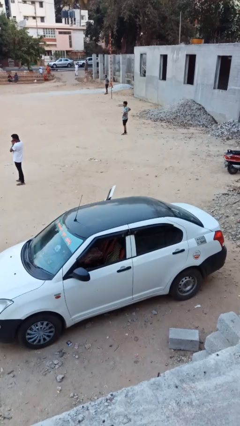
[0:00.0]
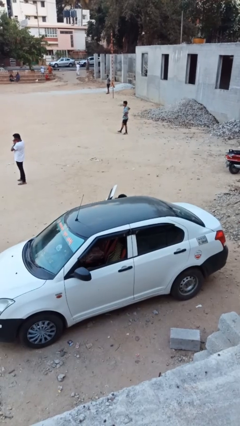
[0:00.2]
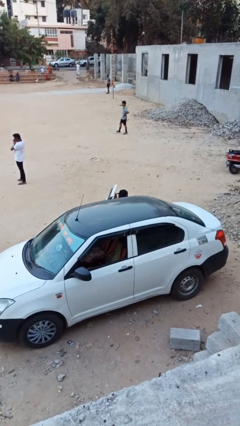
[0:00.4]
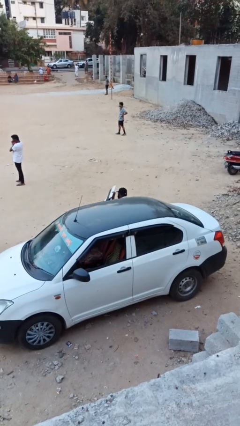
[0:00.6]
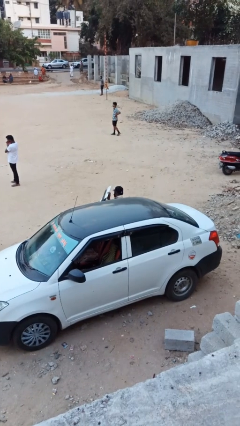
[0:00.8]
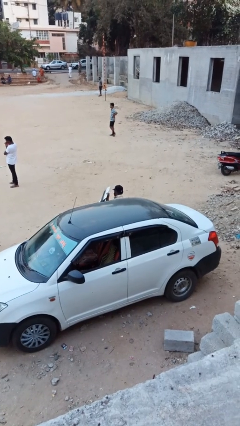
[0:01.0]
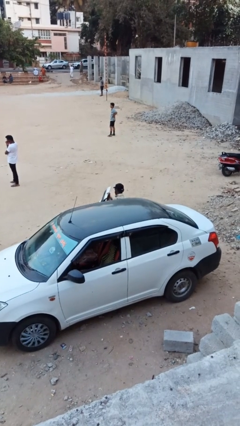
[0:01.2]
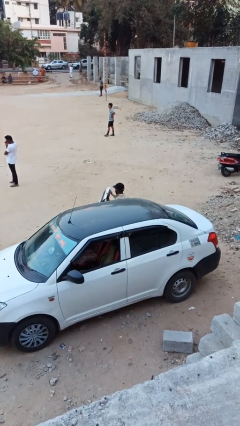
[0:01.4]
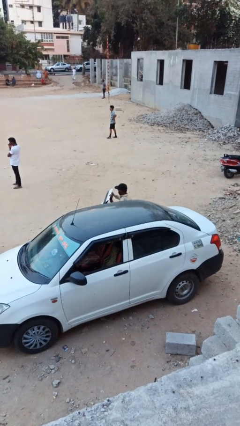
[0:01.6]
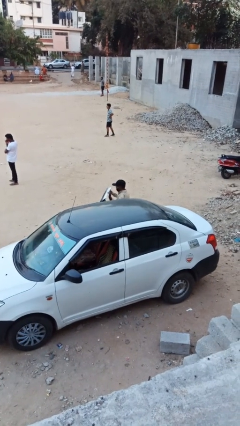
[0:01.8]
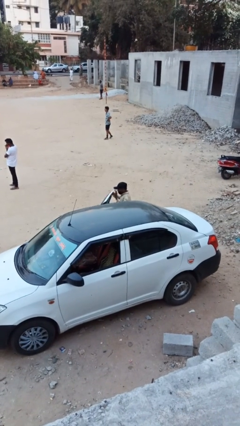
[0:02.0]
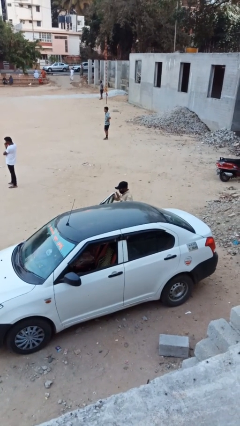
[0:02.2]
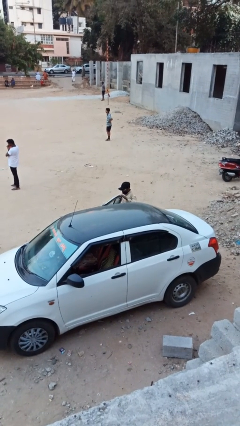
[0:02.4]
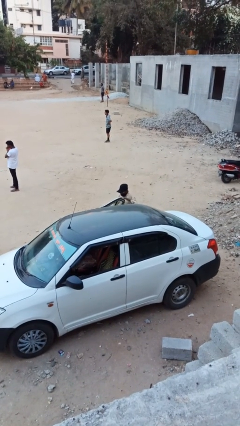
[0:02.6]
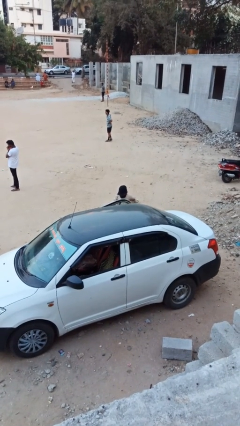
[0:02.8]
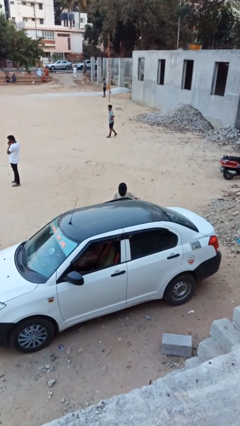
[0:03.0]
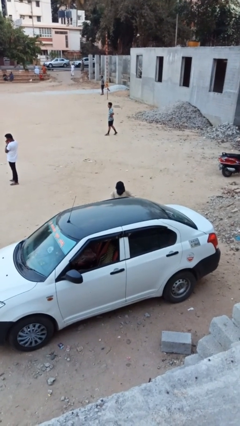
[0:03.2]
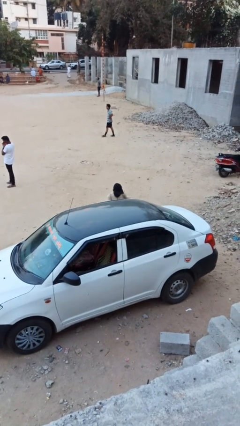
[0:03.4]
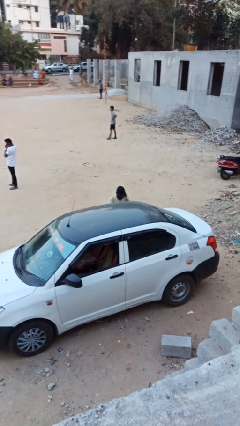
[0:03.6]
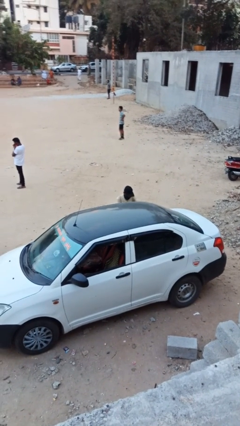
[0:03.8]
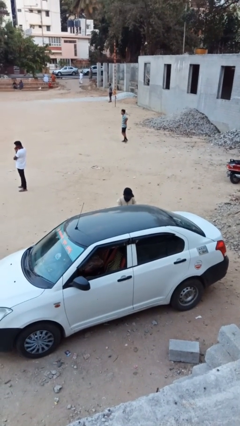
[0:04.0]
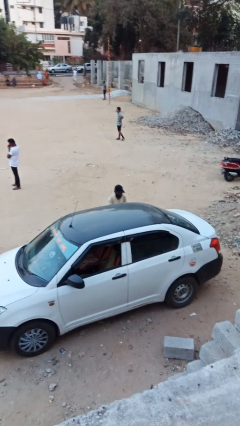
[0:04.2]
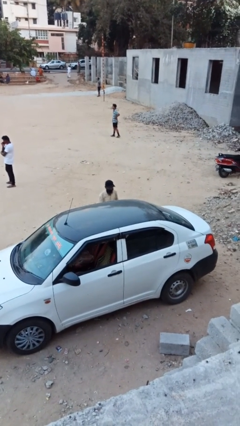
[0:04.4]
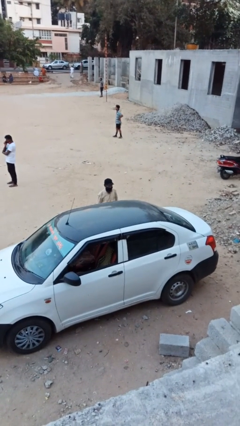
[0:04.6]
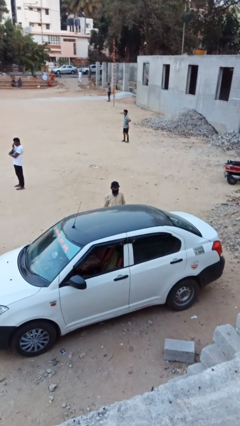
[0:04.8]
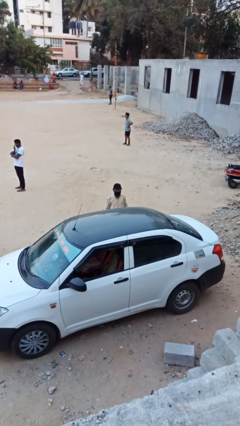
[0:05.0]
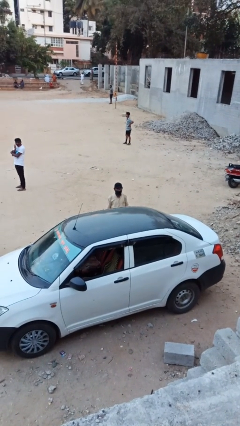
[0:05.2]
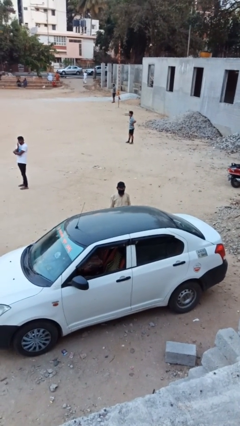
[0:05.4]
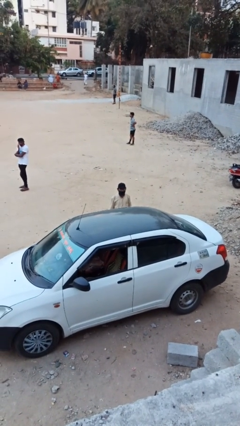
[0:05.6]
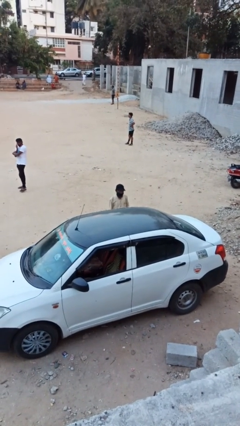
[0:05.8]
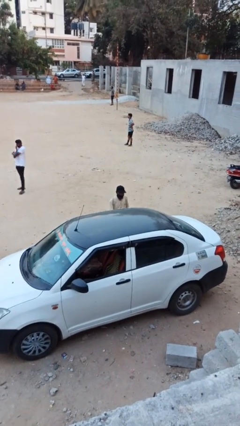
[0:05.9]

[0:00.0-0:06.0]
person exits car

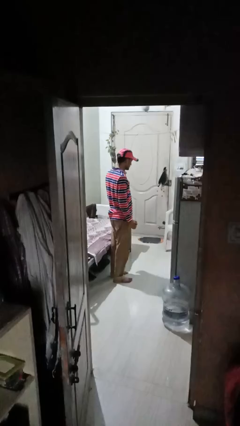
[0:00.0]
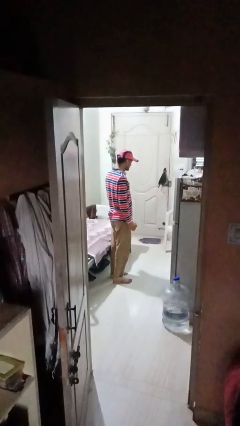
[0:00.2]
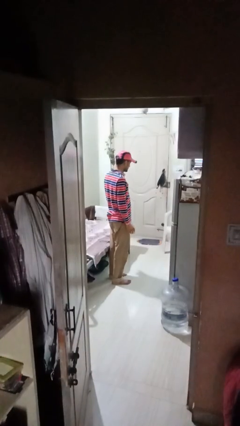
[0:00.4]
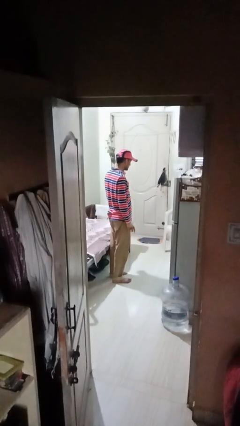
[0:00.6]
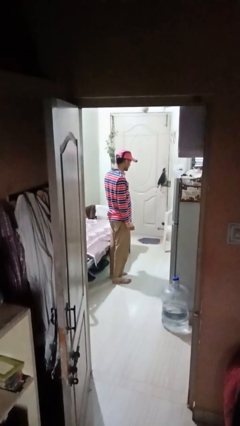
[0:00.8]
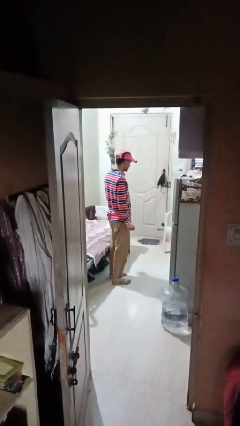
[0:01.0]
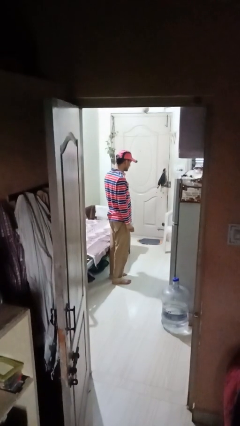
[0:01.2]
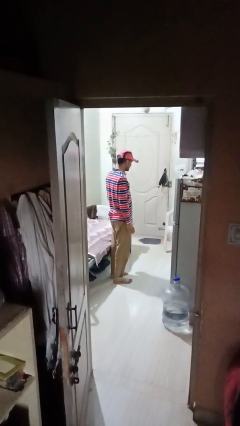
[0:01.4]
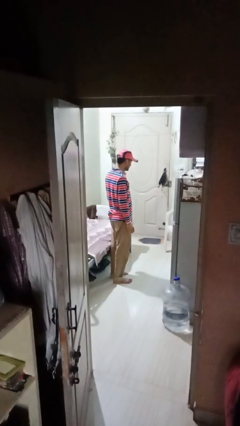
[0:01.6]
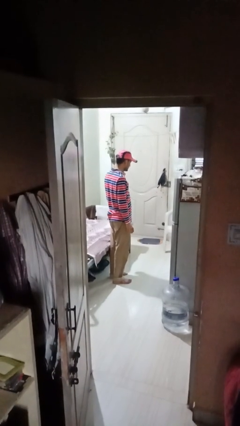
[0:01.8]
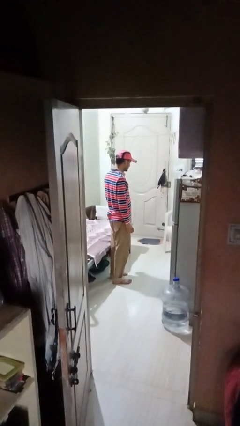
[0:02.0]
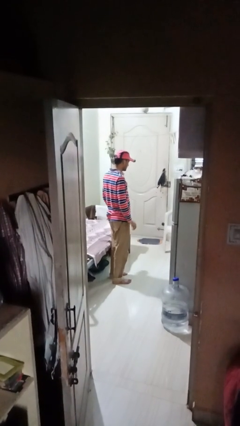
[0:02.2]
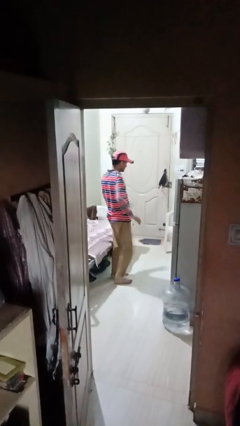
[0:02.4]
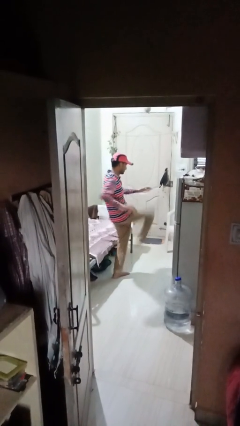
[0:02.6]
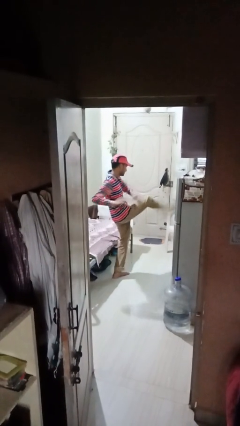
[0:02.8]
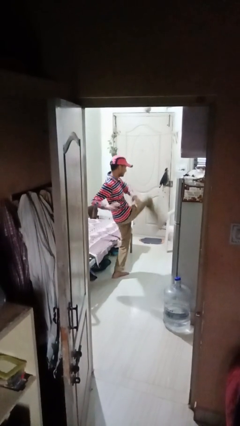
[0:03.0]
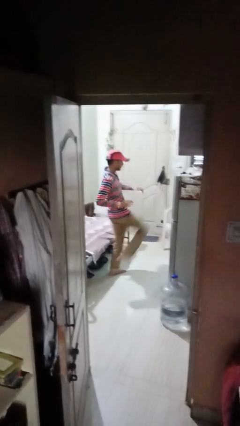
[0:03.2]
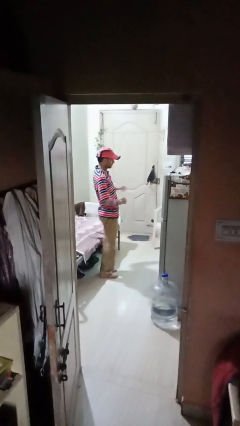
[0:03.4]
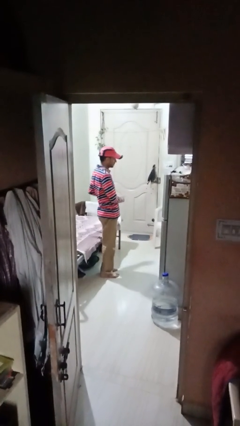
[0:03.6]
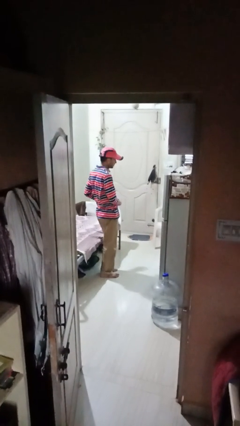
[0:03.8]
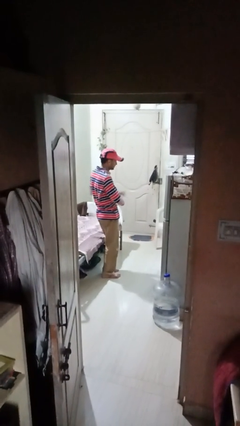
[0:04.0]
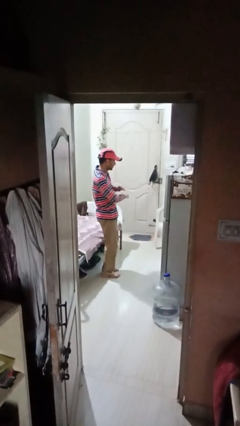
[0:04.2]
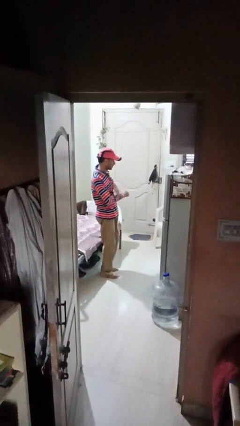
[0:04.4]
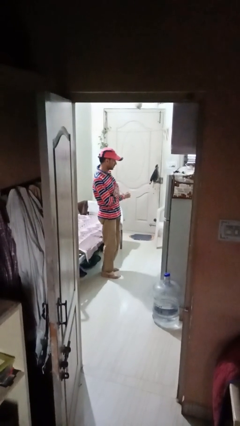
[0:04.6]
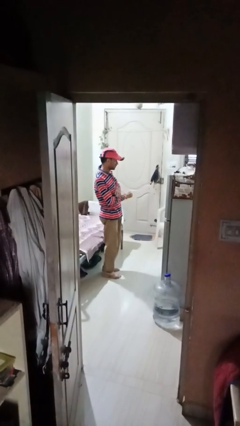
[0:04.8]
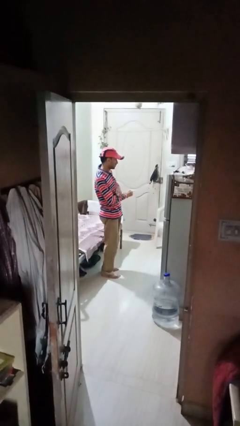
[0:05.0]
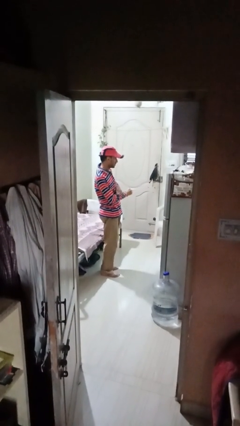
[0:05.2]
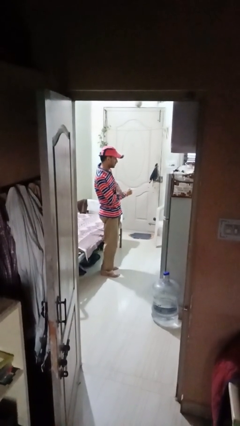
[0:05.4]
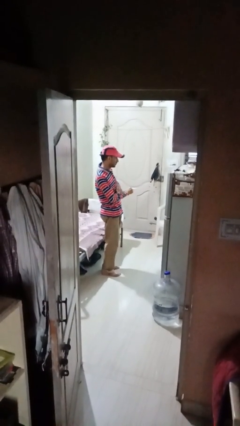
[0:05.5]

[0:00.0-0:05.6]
person karate kicks

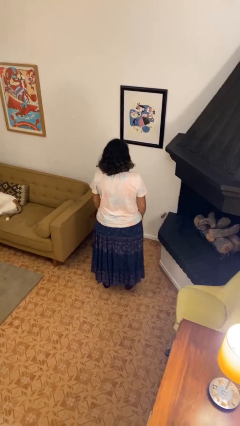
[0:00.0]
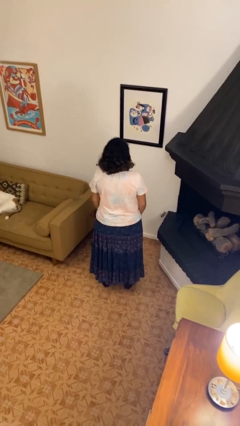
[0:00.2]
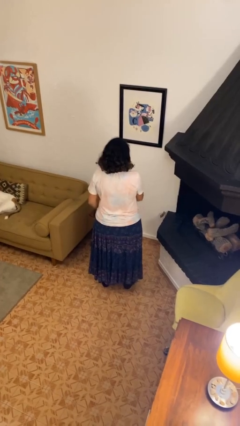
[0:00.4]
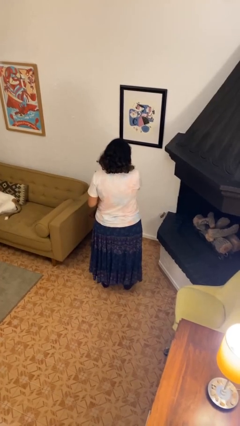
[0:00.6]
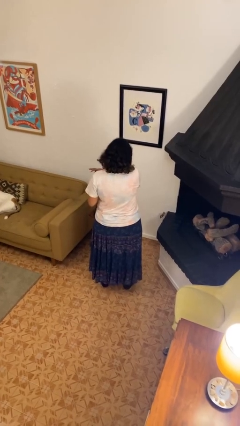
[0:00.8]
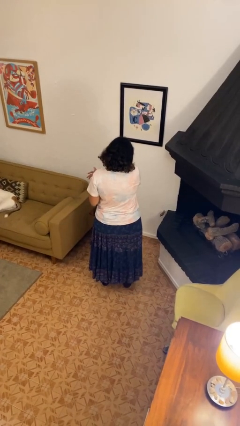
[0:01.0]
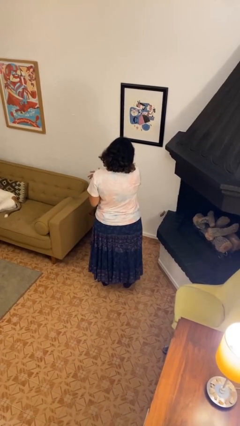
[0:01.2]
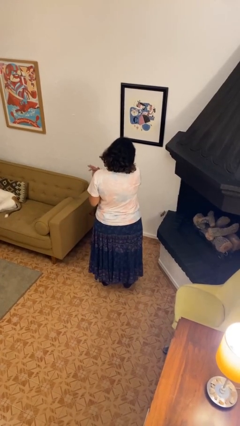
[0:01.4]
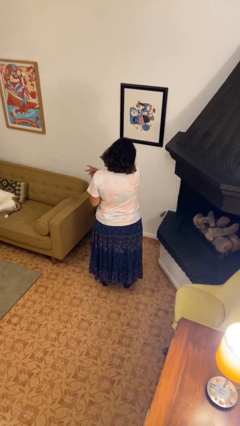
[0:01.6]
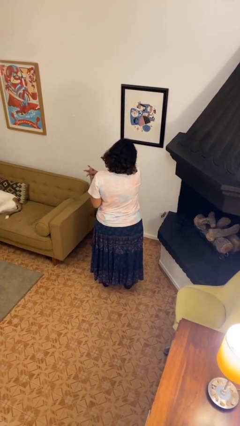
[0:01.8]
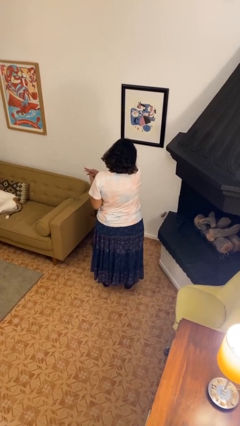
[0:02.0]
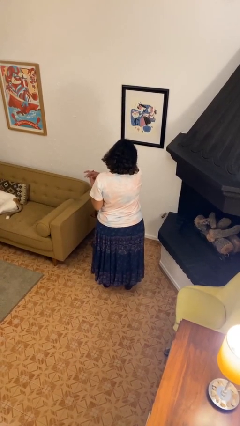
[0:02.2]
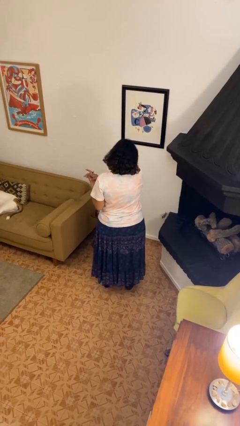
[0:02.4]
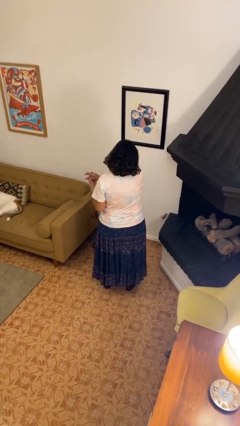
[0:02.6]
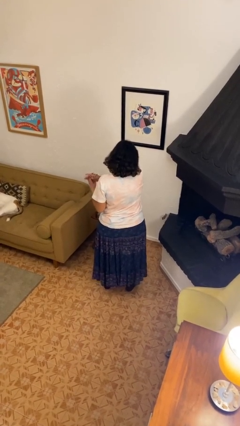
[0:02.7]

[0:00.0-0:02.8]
person cracks knuckles

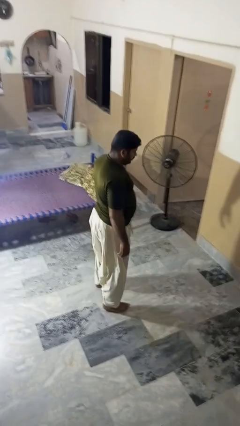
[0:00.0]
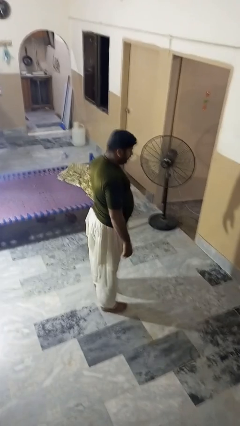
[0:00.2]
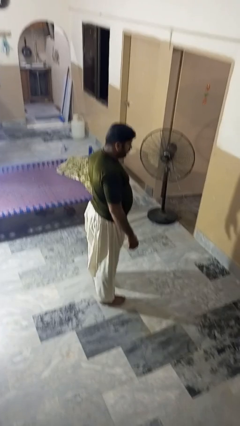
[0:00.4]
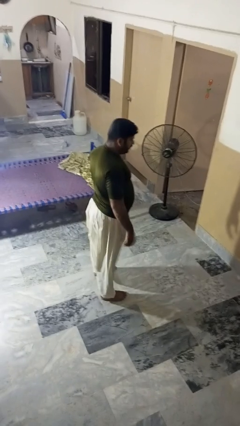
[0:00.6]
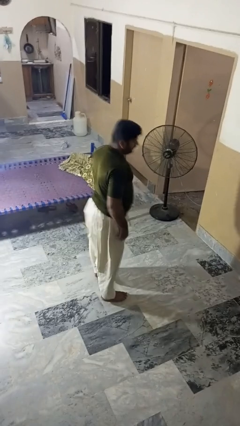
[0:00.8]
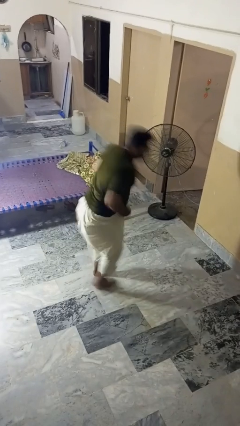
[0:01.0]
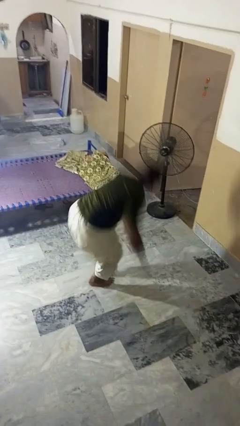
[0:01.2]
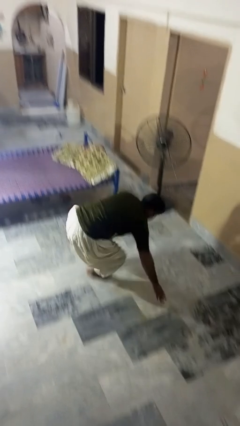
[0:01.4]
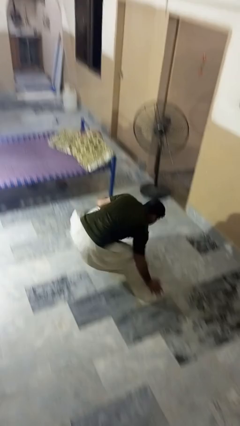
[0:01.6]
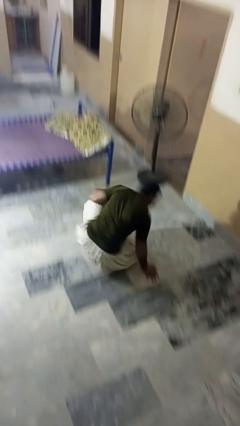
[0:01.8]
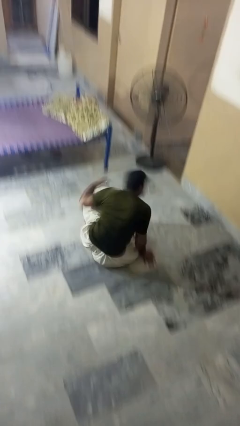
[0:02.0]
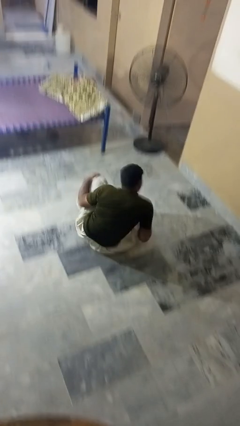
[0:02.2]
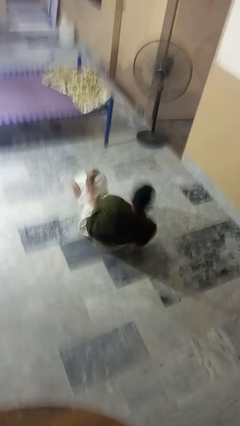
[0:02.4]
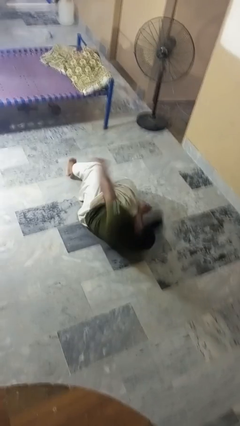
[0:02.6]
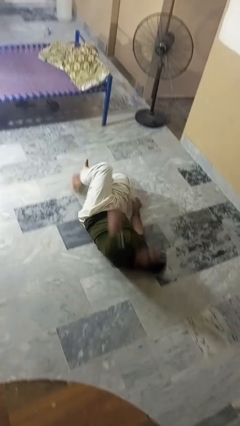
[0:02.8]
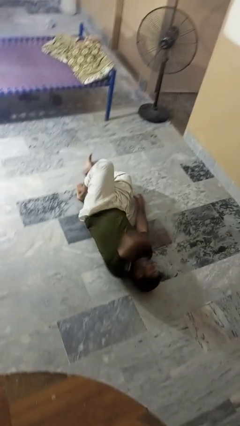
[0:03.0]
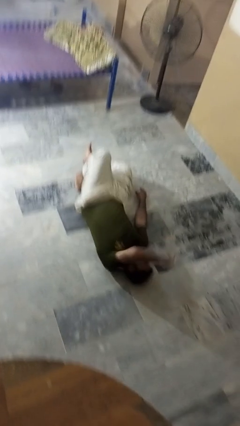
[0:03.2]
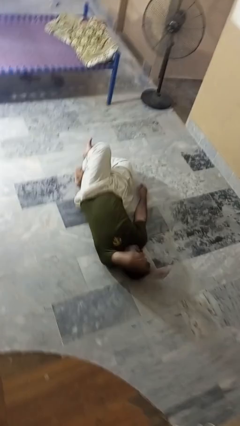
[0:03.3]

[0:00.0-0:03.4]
person falls while standing

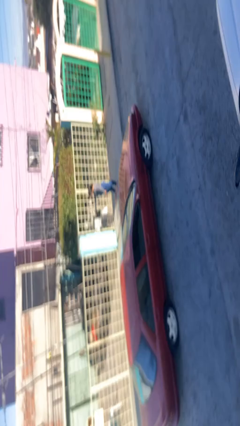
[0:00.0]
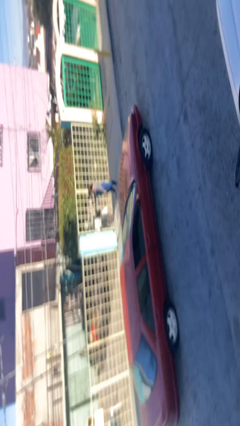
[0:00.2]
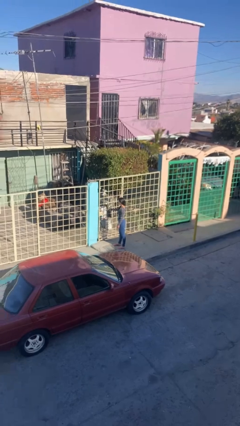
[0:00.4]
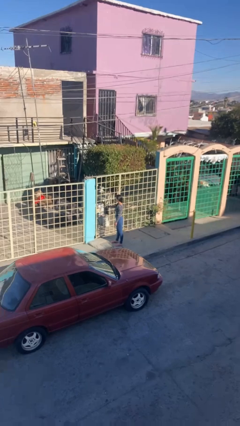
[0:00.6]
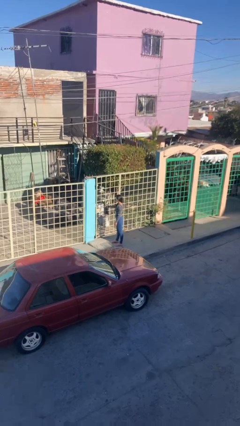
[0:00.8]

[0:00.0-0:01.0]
person closes facility door
